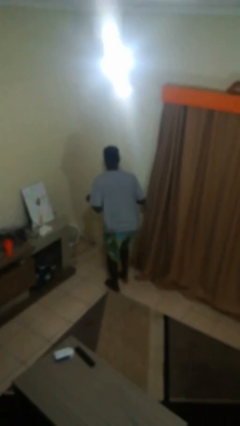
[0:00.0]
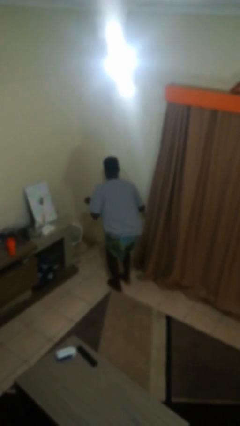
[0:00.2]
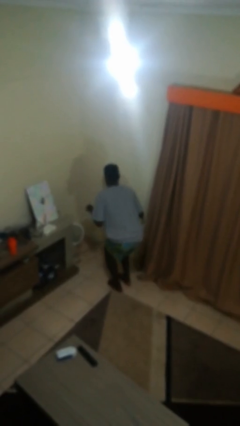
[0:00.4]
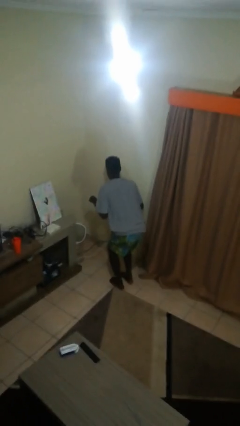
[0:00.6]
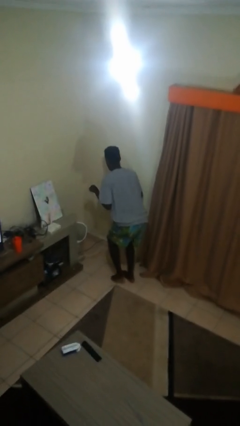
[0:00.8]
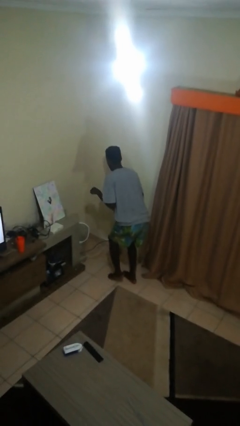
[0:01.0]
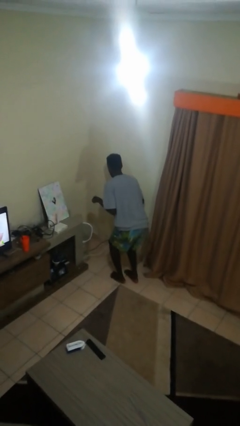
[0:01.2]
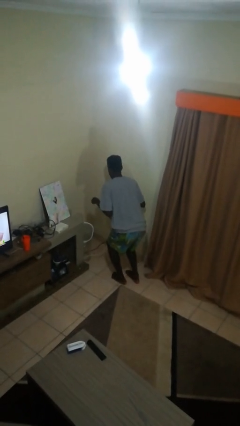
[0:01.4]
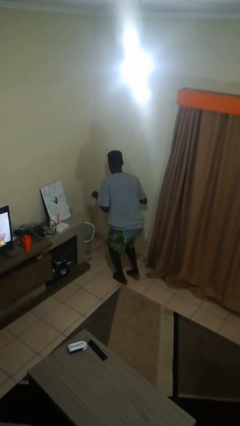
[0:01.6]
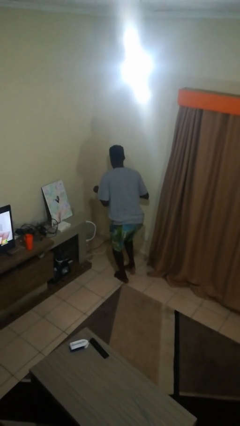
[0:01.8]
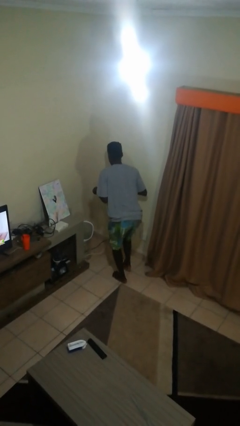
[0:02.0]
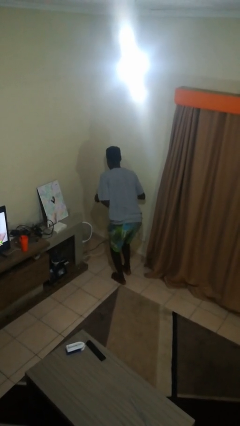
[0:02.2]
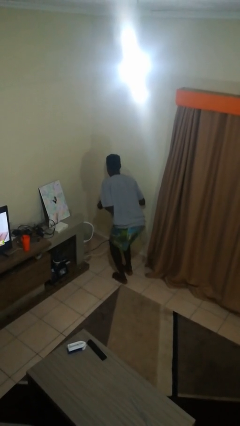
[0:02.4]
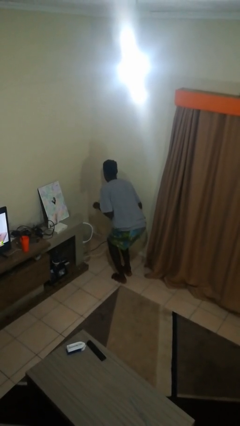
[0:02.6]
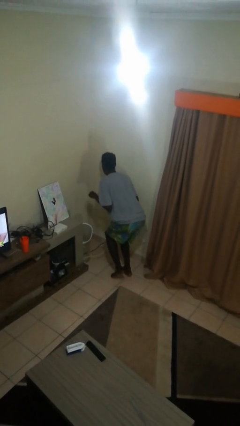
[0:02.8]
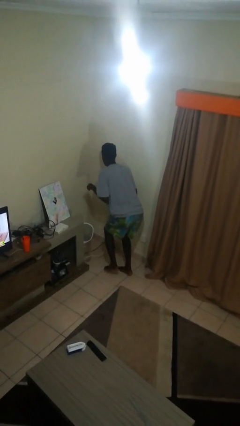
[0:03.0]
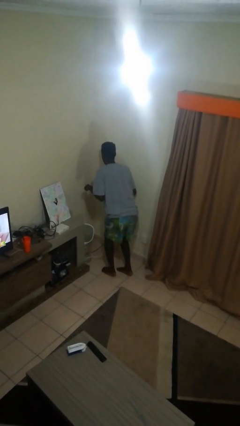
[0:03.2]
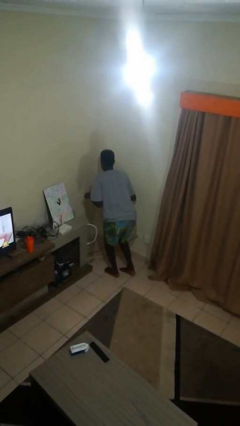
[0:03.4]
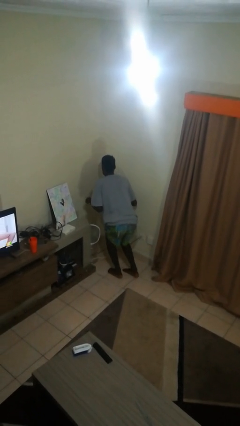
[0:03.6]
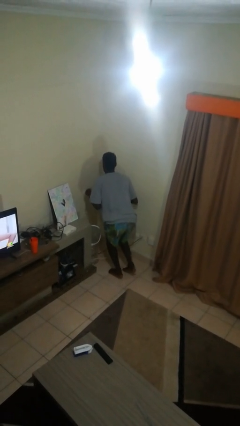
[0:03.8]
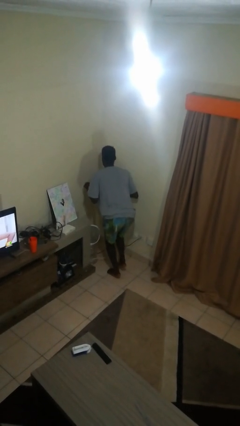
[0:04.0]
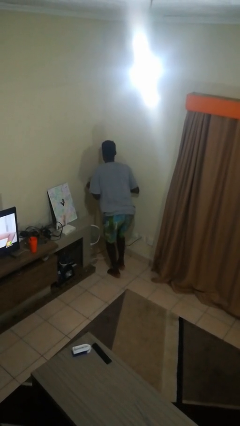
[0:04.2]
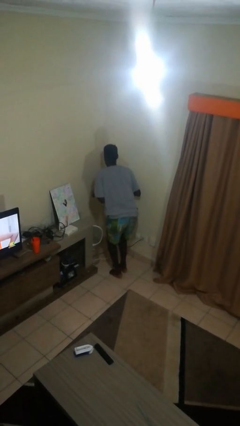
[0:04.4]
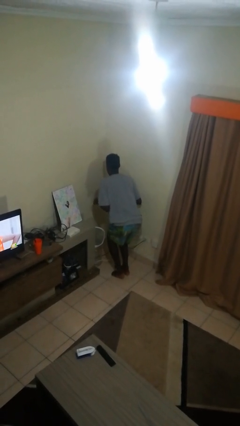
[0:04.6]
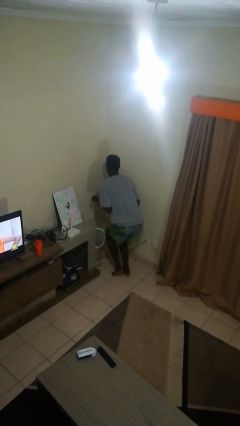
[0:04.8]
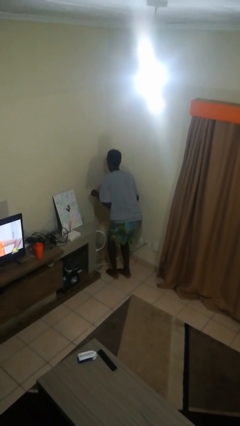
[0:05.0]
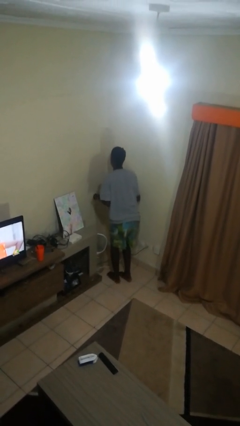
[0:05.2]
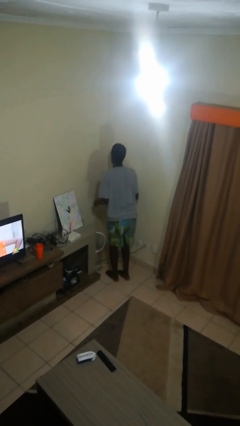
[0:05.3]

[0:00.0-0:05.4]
person walks tiptoe

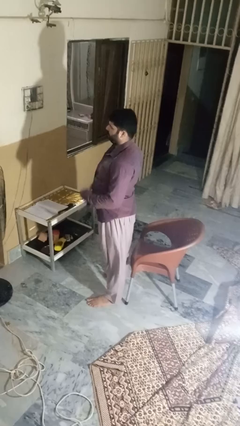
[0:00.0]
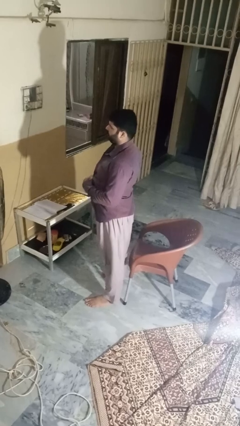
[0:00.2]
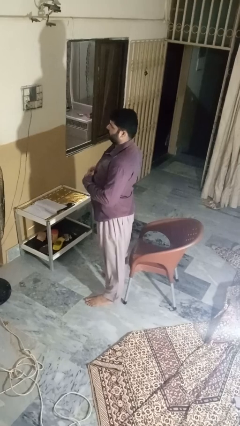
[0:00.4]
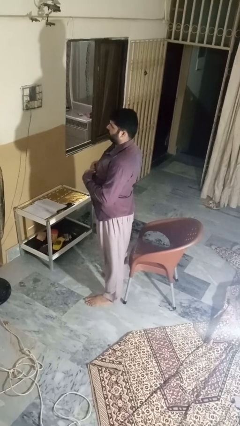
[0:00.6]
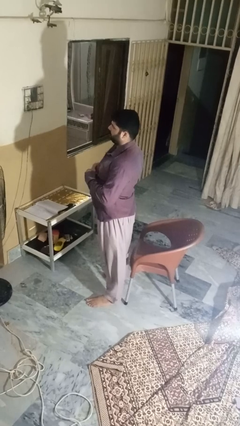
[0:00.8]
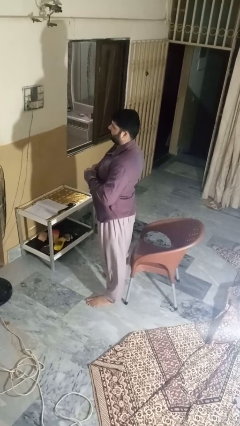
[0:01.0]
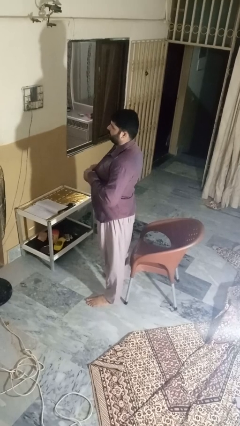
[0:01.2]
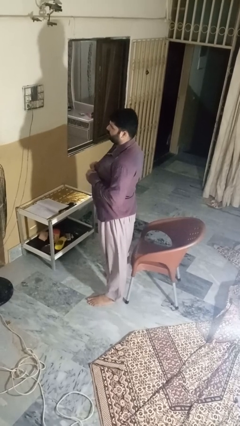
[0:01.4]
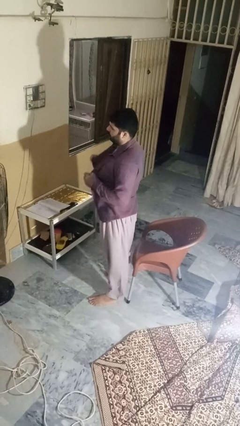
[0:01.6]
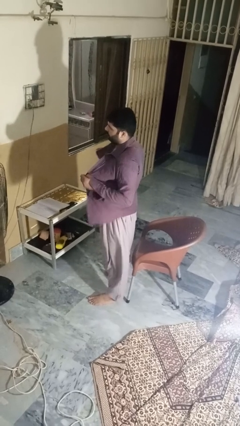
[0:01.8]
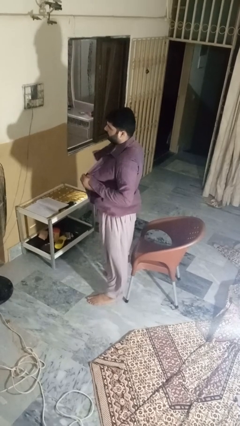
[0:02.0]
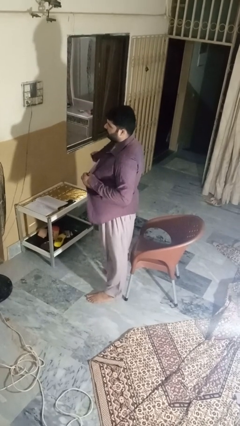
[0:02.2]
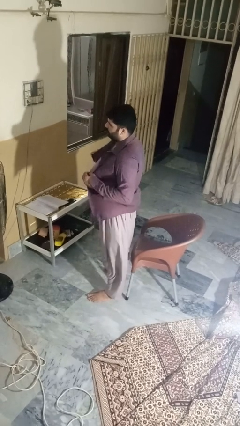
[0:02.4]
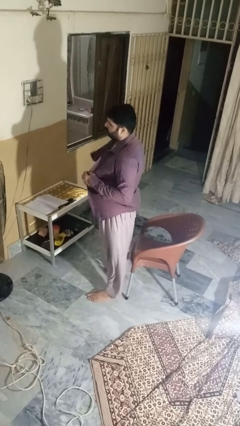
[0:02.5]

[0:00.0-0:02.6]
person unbuttons shirt

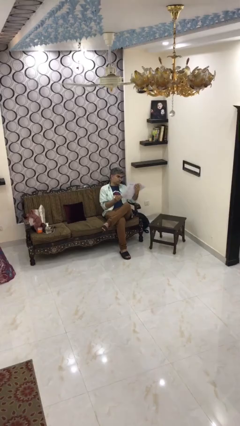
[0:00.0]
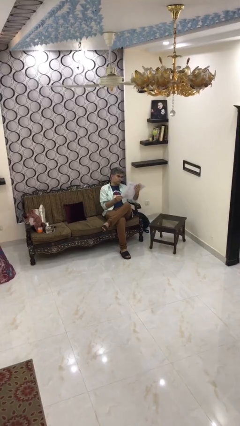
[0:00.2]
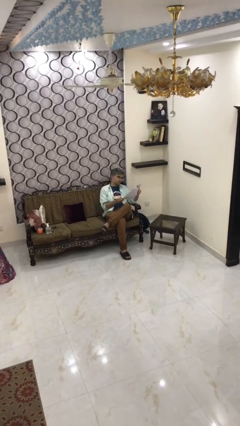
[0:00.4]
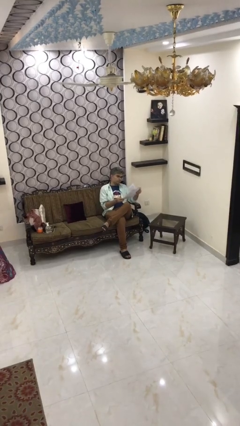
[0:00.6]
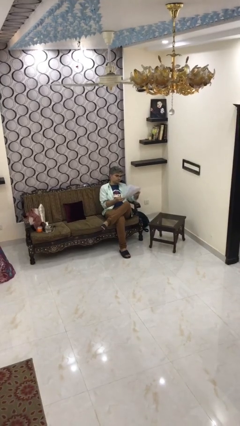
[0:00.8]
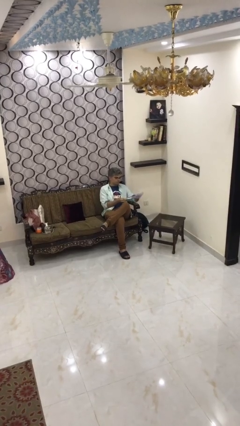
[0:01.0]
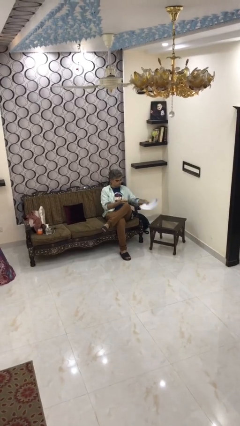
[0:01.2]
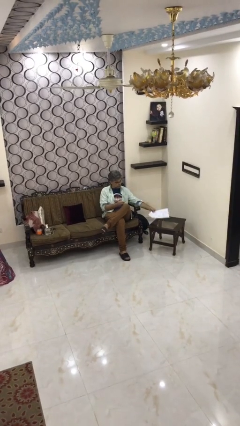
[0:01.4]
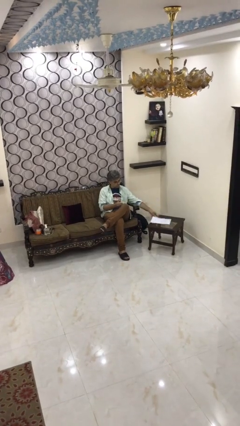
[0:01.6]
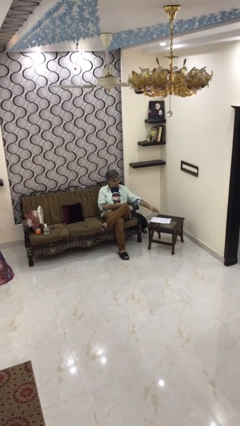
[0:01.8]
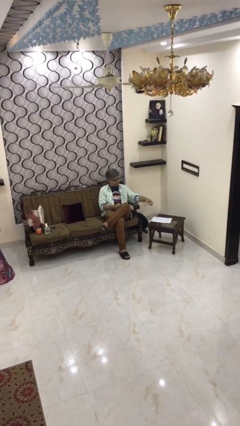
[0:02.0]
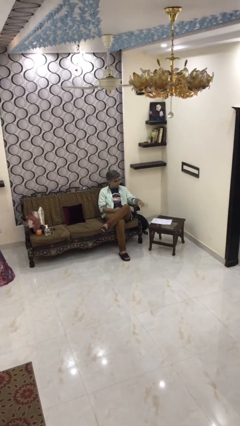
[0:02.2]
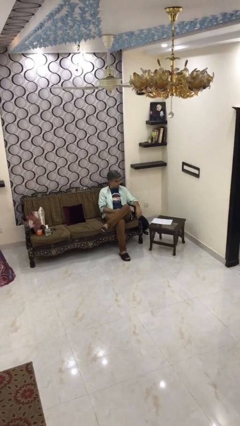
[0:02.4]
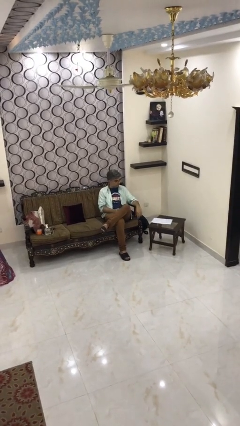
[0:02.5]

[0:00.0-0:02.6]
person puts down object on table

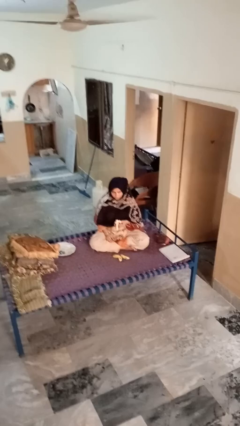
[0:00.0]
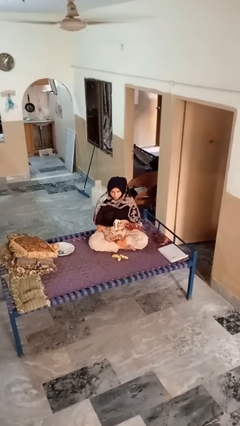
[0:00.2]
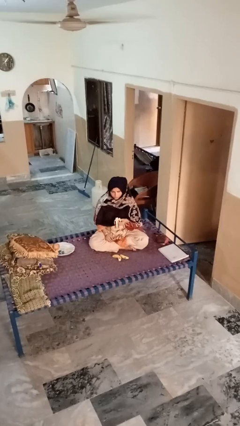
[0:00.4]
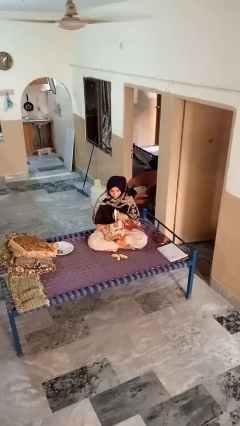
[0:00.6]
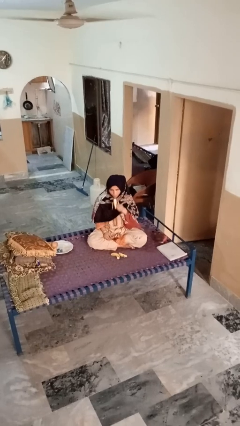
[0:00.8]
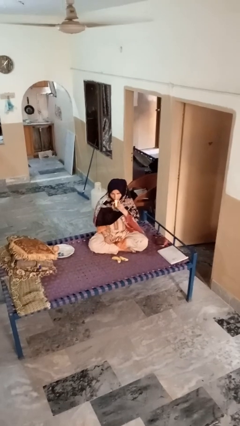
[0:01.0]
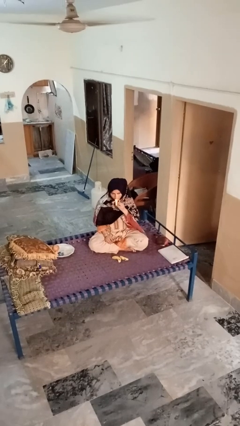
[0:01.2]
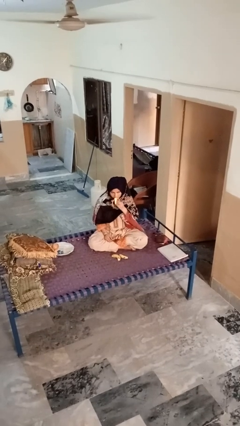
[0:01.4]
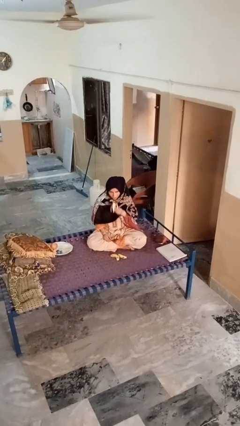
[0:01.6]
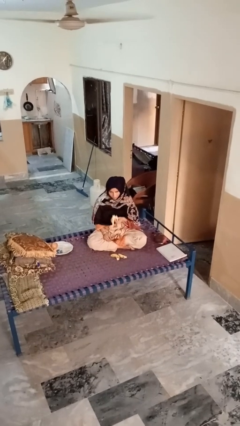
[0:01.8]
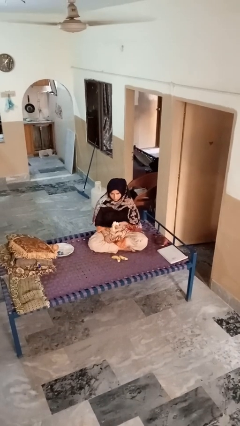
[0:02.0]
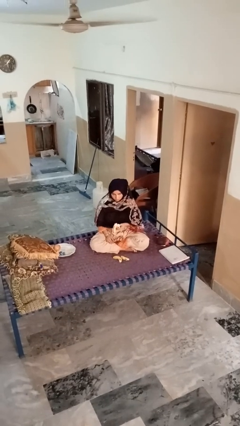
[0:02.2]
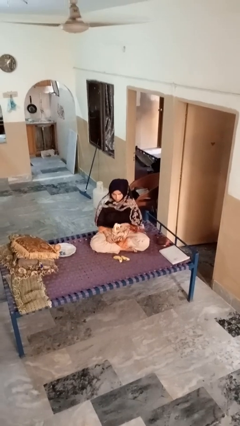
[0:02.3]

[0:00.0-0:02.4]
person eats banana

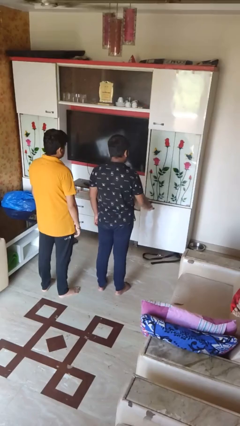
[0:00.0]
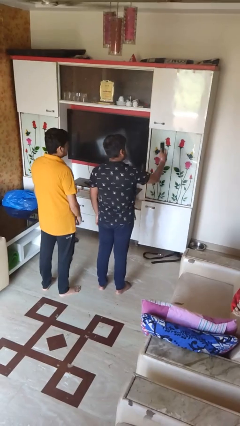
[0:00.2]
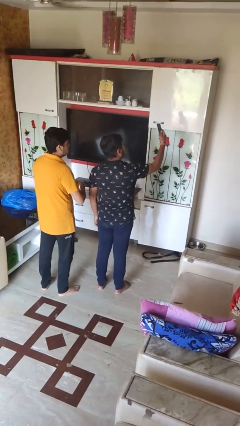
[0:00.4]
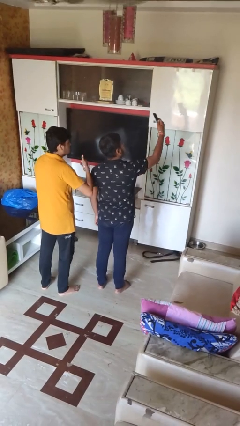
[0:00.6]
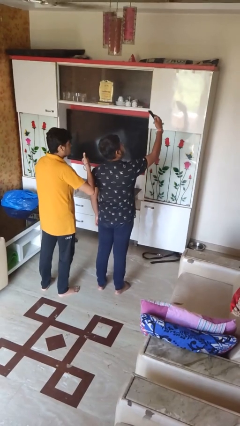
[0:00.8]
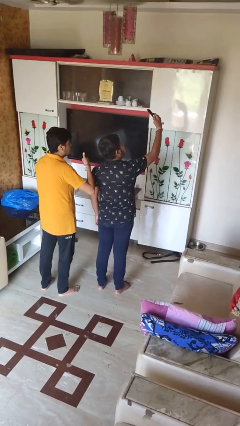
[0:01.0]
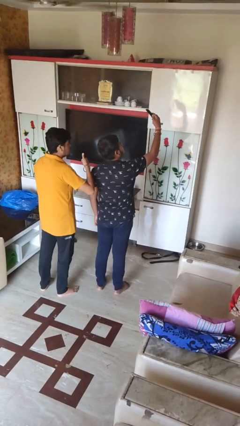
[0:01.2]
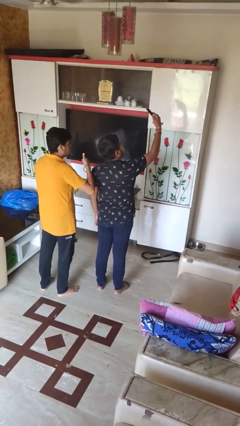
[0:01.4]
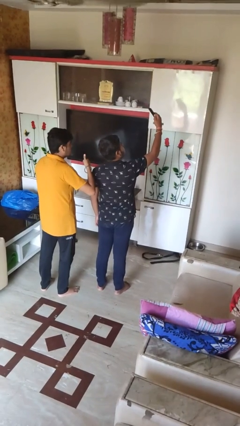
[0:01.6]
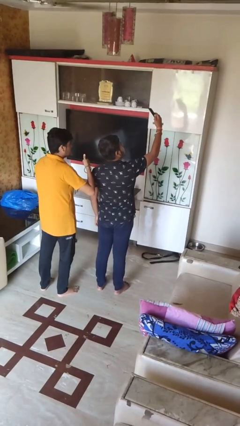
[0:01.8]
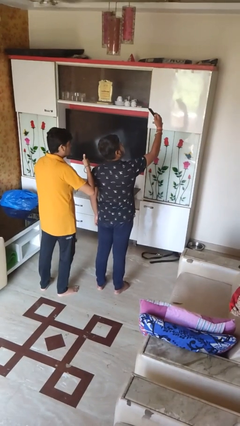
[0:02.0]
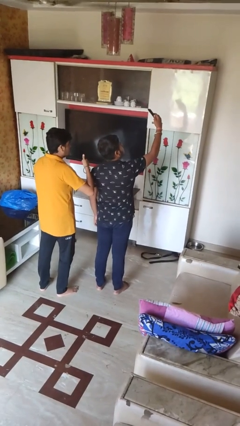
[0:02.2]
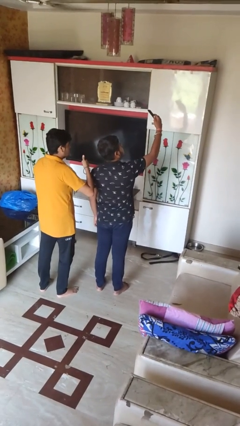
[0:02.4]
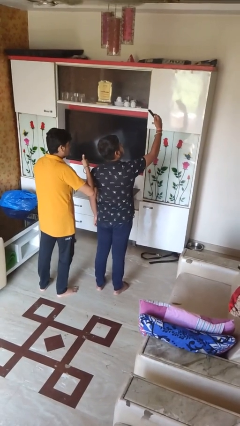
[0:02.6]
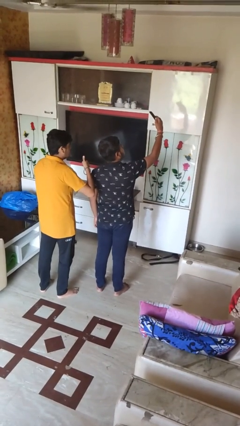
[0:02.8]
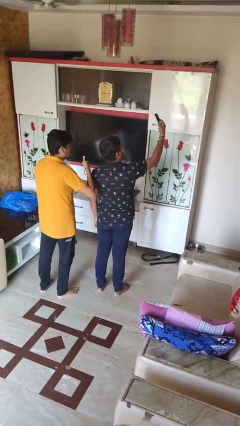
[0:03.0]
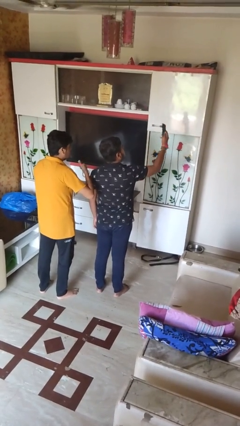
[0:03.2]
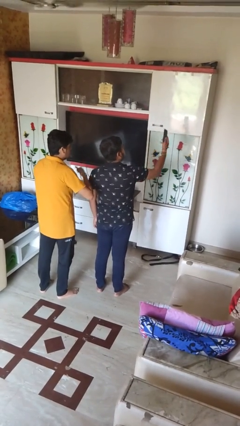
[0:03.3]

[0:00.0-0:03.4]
person takes selfie with person

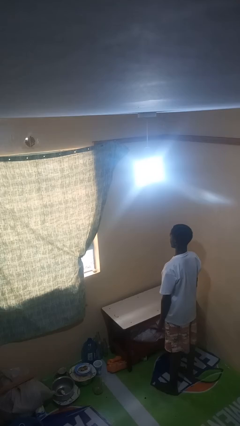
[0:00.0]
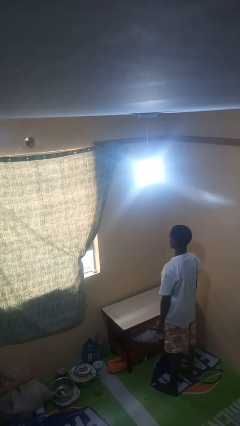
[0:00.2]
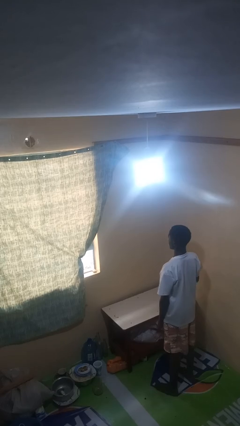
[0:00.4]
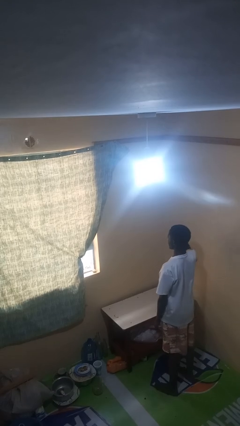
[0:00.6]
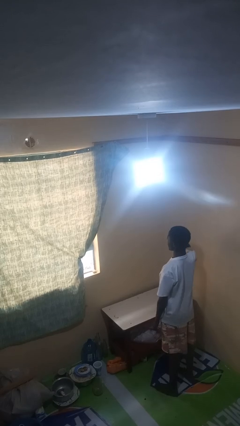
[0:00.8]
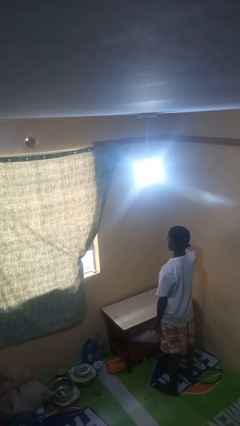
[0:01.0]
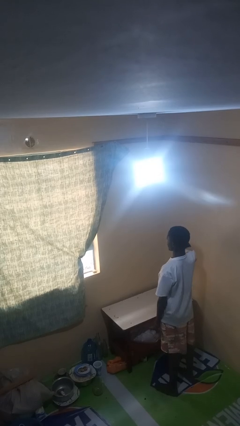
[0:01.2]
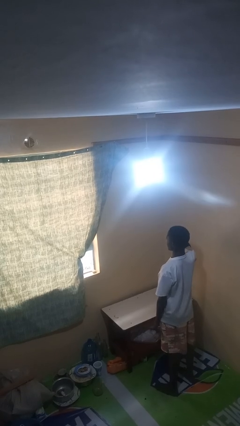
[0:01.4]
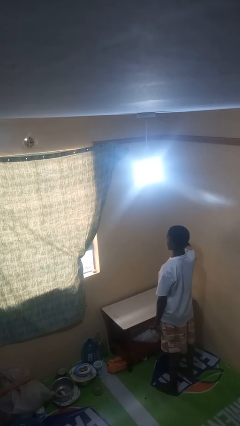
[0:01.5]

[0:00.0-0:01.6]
person salutes
